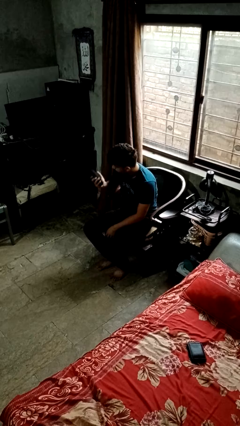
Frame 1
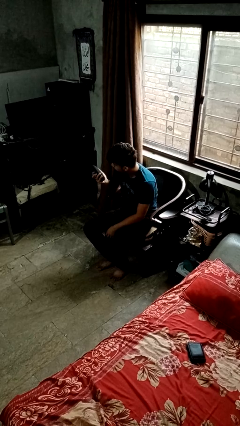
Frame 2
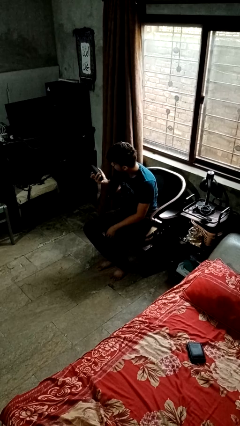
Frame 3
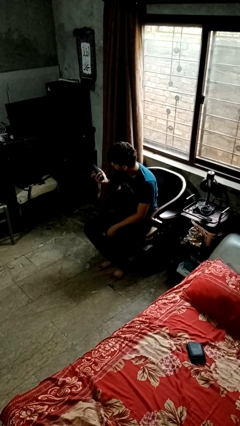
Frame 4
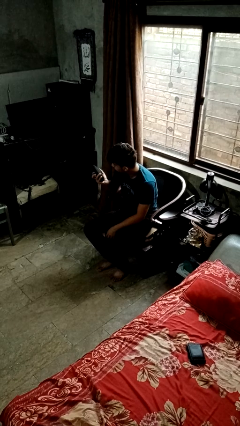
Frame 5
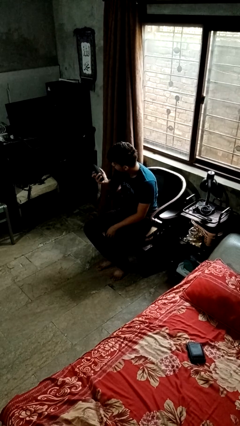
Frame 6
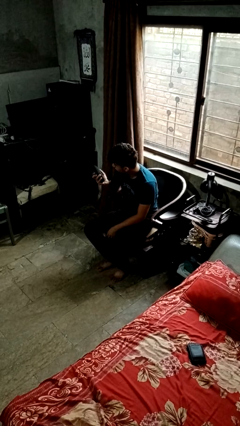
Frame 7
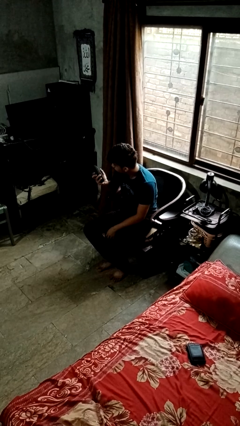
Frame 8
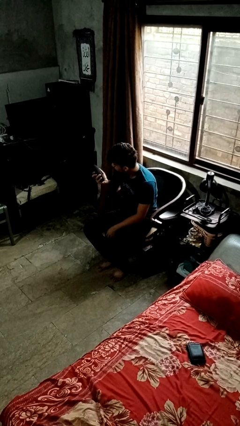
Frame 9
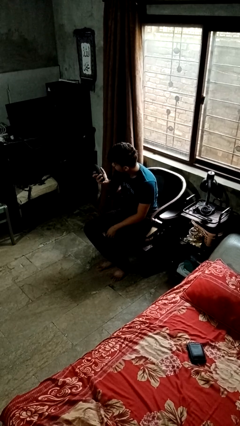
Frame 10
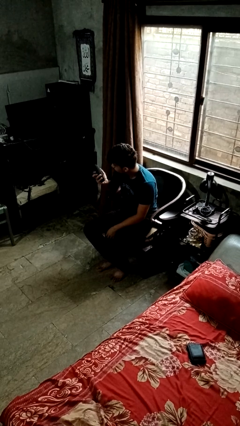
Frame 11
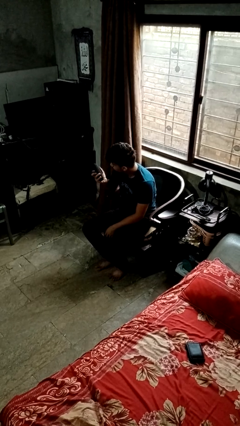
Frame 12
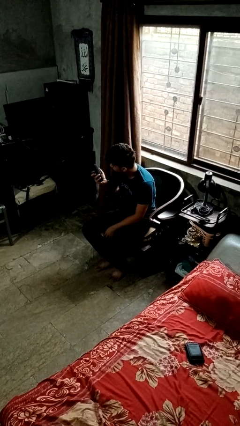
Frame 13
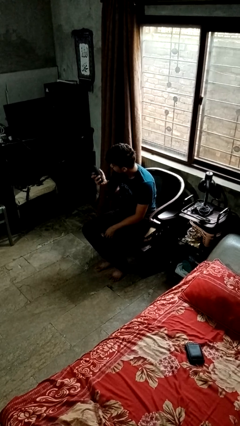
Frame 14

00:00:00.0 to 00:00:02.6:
person uses television remote

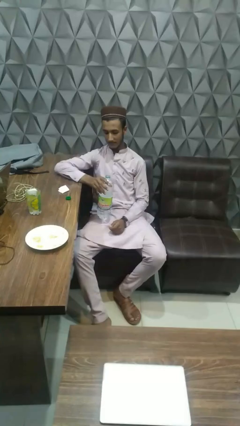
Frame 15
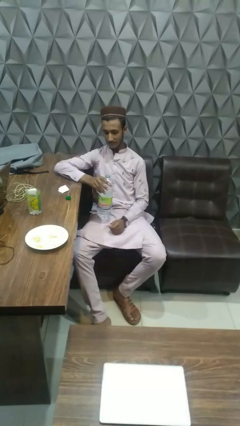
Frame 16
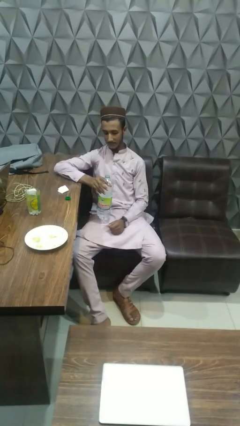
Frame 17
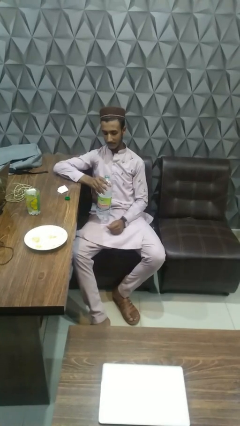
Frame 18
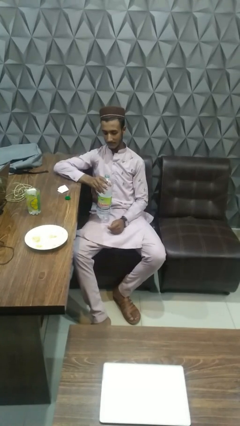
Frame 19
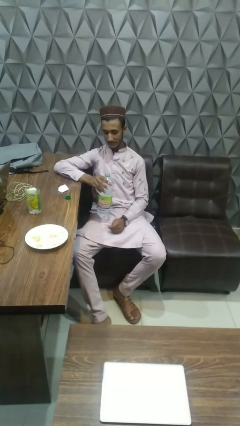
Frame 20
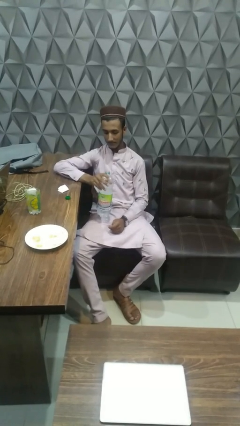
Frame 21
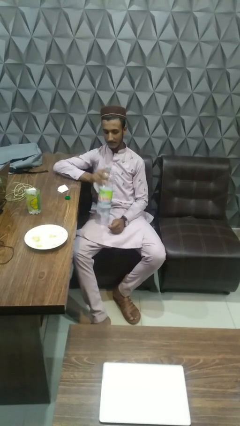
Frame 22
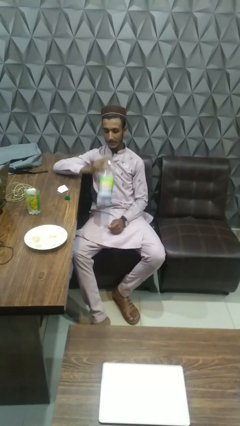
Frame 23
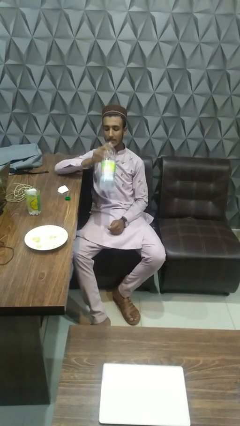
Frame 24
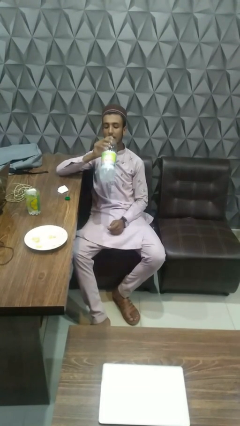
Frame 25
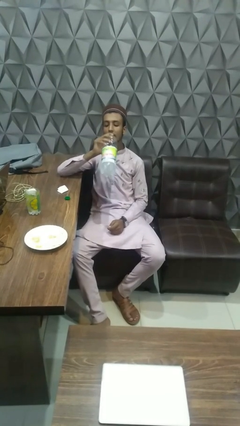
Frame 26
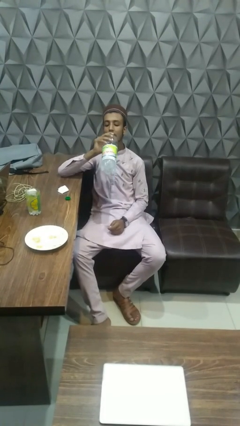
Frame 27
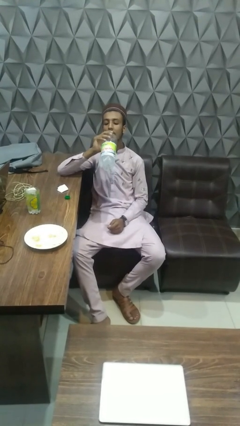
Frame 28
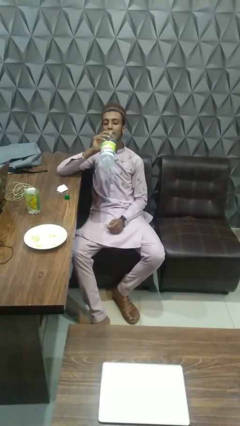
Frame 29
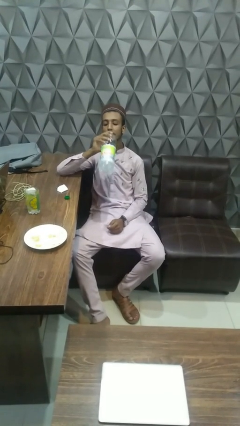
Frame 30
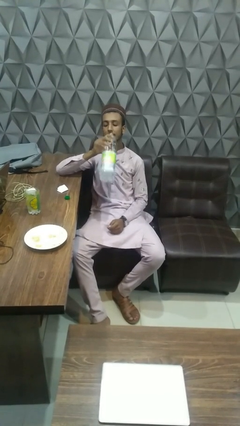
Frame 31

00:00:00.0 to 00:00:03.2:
person drinks from bottle

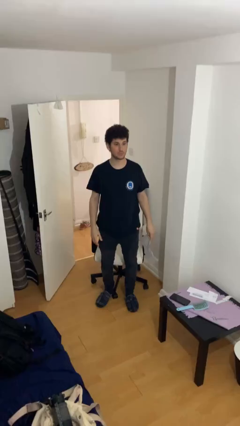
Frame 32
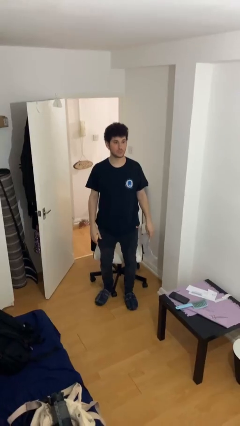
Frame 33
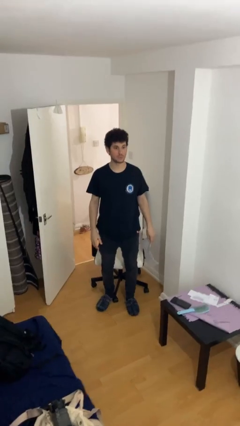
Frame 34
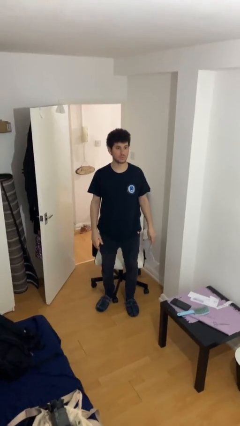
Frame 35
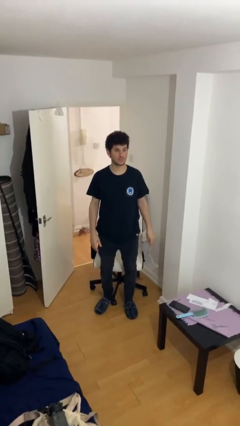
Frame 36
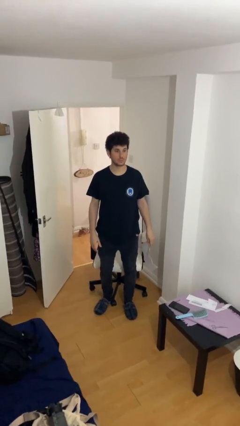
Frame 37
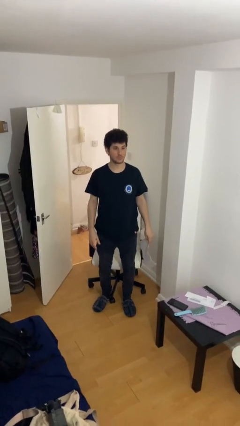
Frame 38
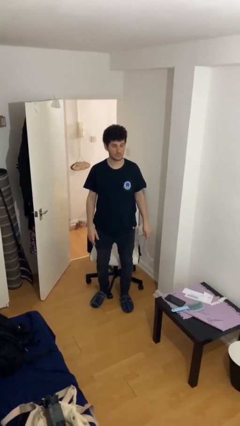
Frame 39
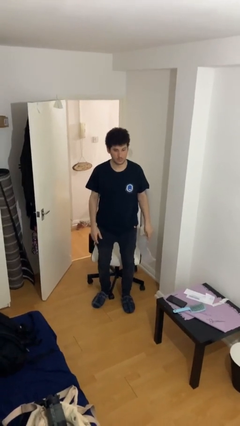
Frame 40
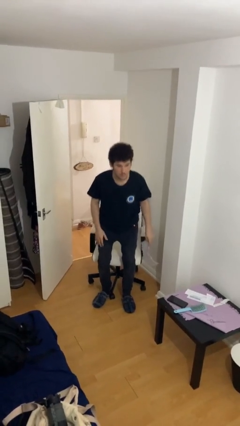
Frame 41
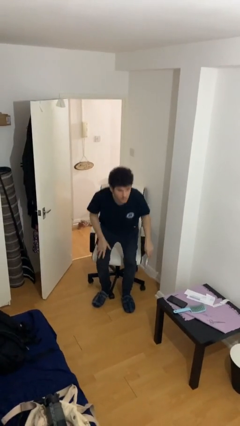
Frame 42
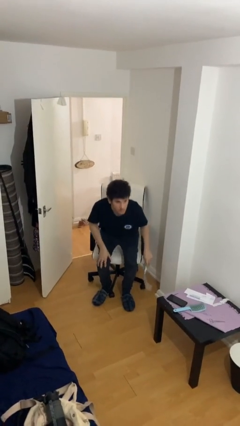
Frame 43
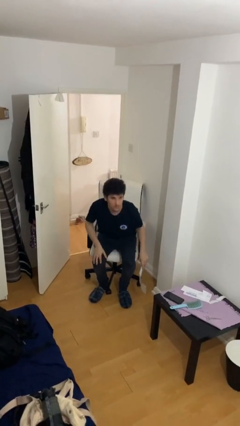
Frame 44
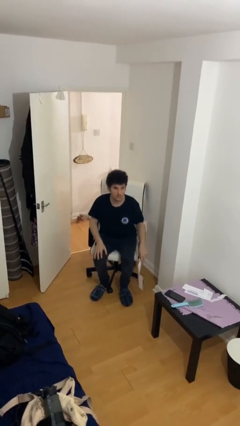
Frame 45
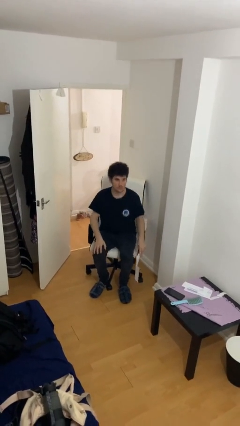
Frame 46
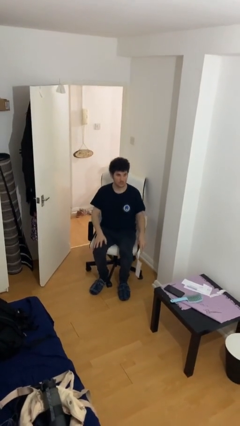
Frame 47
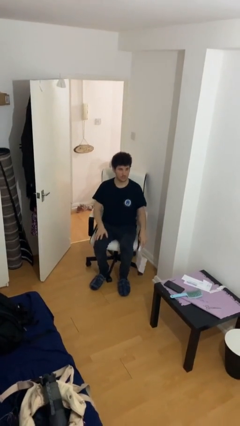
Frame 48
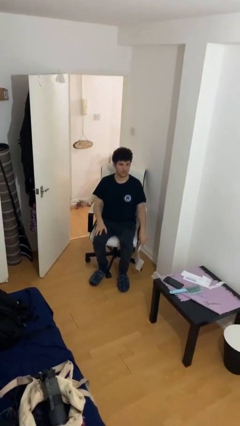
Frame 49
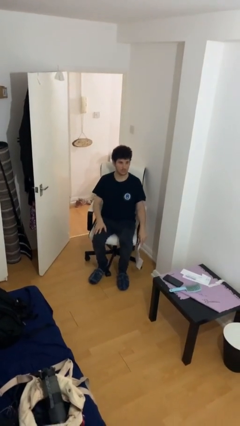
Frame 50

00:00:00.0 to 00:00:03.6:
person sits down

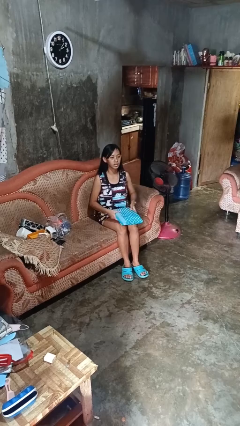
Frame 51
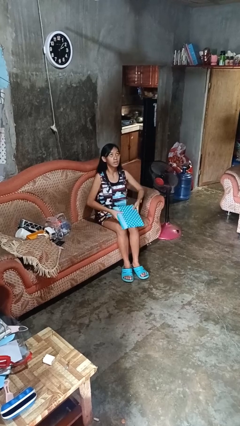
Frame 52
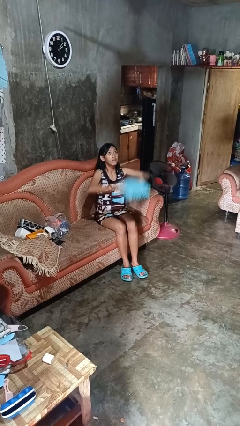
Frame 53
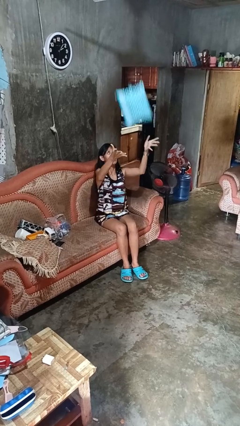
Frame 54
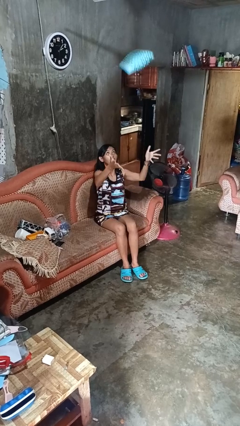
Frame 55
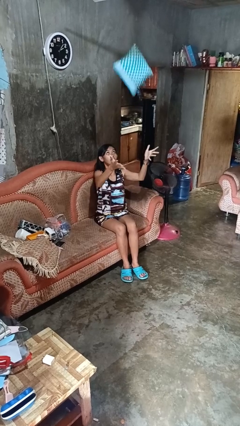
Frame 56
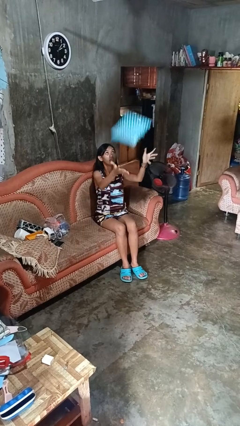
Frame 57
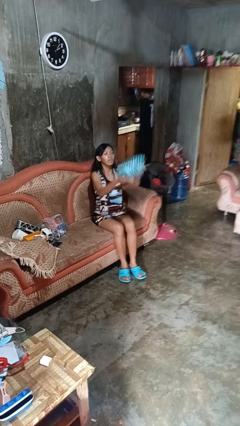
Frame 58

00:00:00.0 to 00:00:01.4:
person drops object

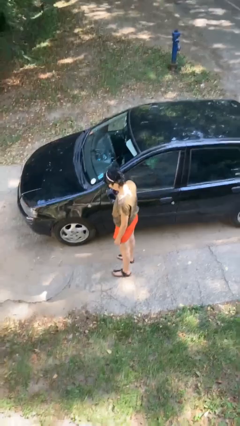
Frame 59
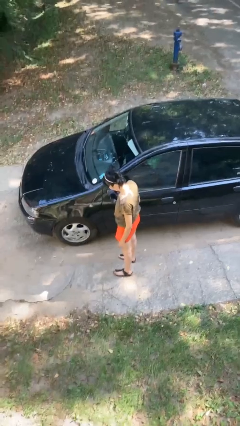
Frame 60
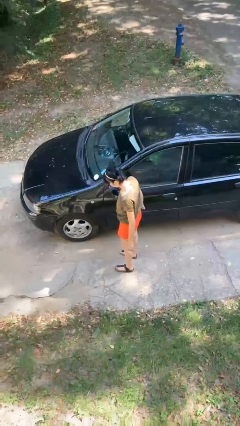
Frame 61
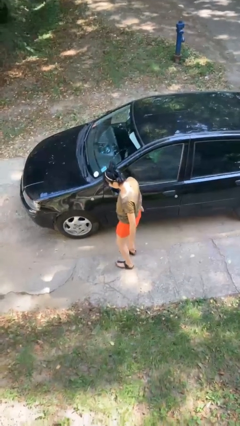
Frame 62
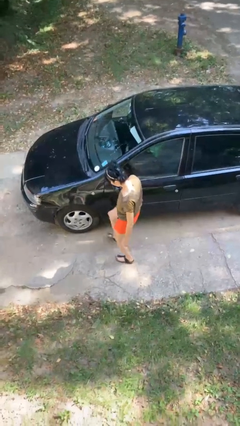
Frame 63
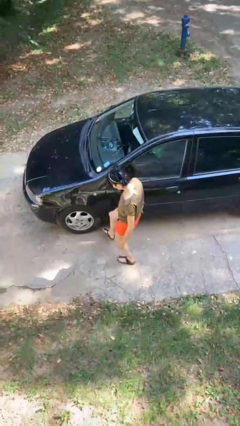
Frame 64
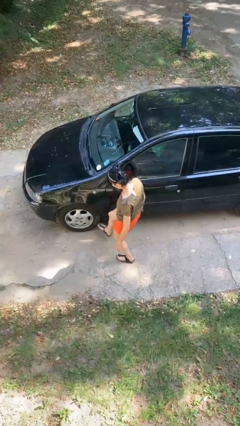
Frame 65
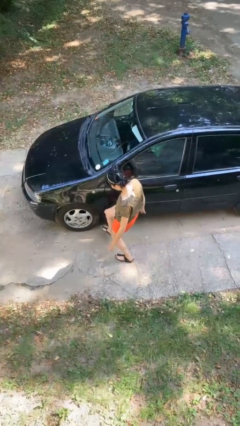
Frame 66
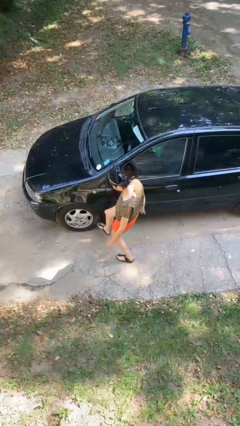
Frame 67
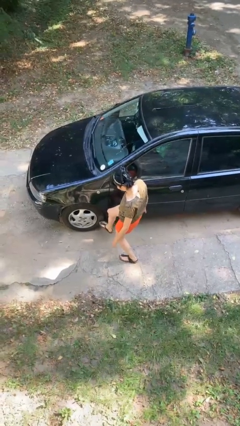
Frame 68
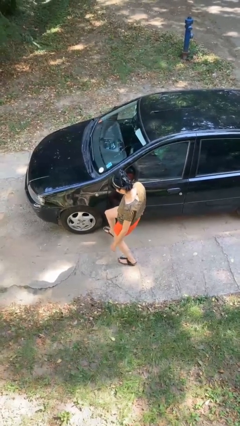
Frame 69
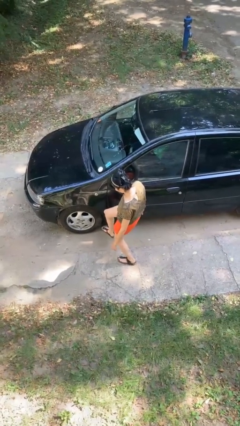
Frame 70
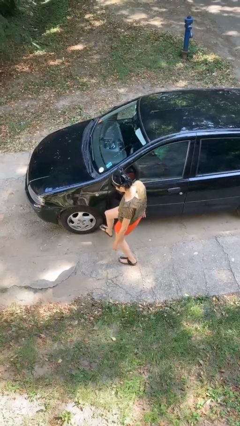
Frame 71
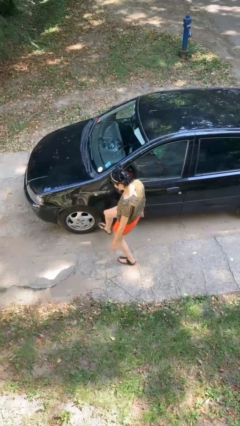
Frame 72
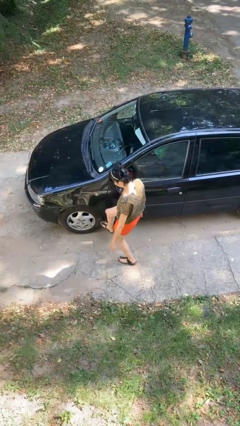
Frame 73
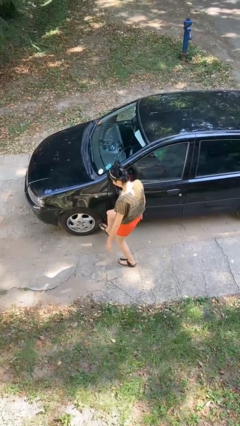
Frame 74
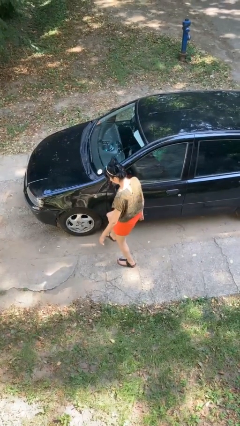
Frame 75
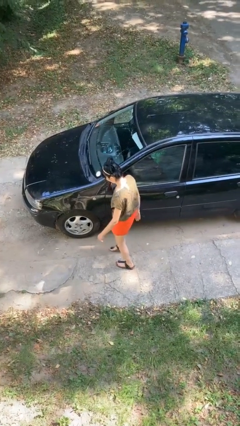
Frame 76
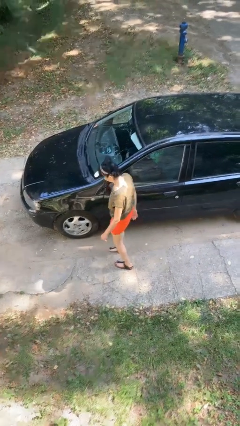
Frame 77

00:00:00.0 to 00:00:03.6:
person kicks car tires

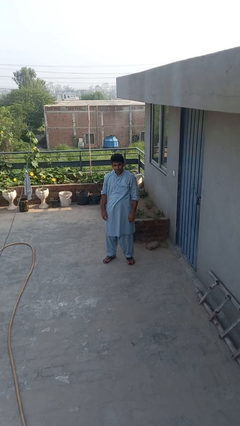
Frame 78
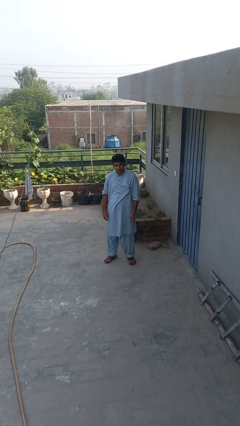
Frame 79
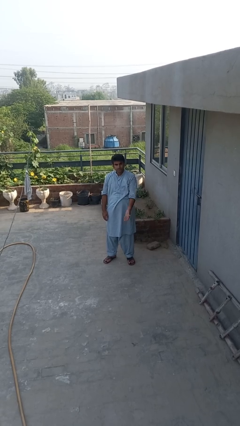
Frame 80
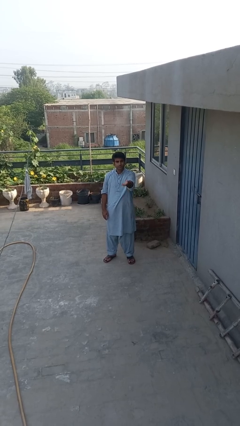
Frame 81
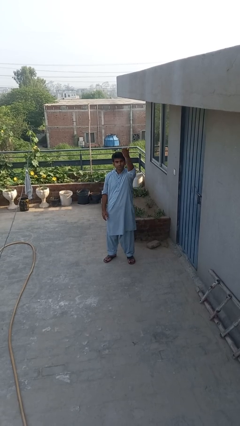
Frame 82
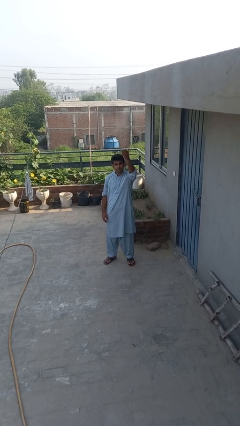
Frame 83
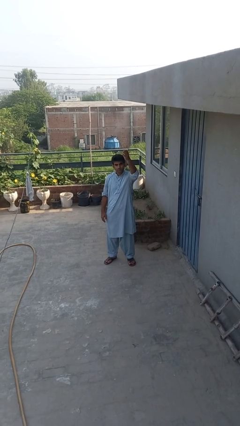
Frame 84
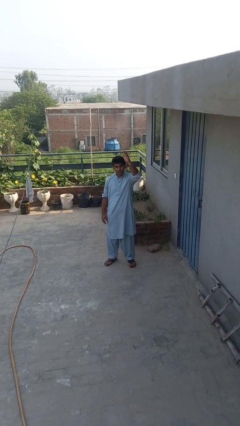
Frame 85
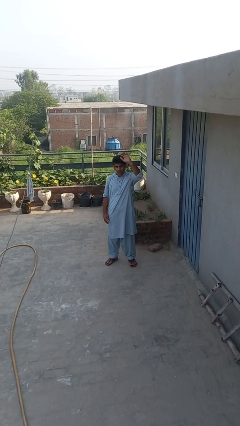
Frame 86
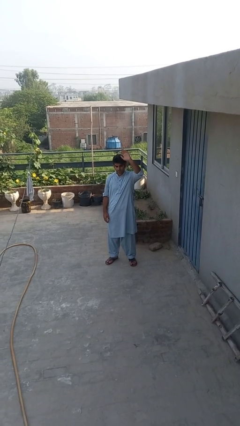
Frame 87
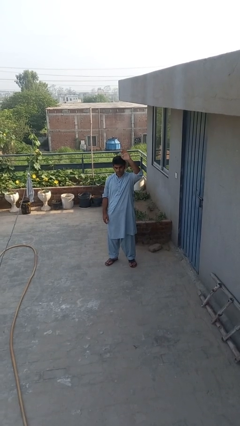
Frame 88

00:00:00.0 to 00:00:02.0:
person gestures swipe up

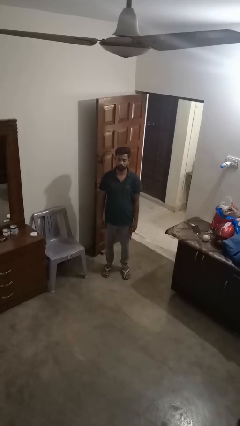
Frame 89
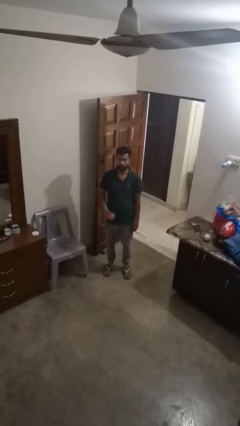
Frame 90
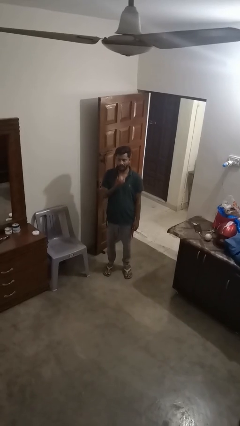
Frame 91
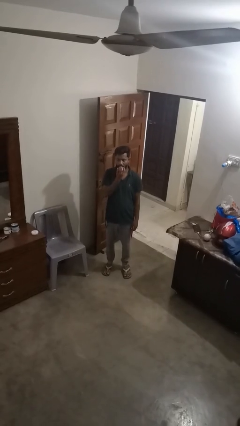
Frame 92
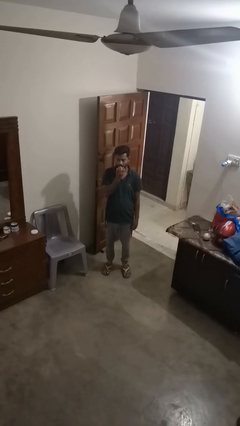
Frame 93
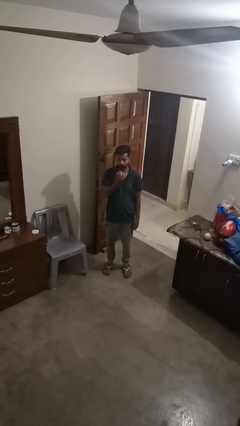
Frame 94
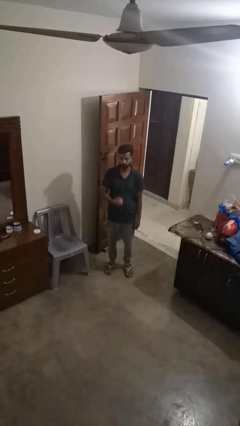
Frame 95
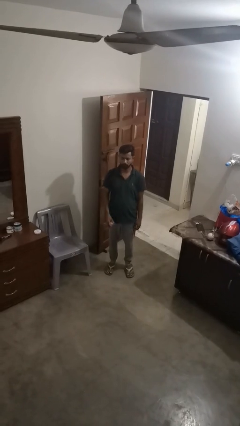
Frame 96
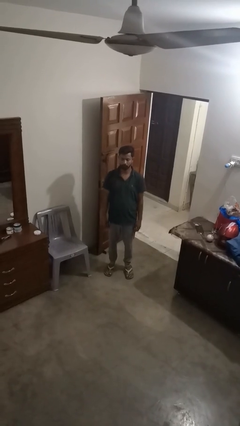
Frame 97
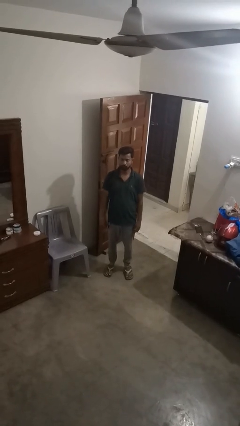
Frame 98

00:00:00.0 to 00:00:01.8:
person eats apple
